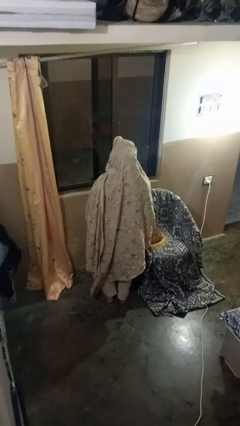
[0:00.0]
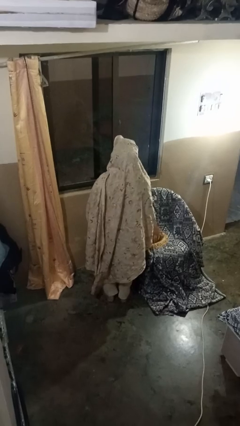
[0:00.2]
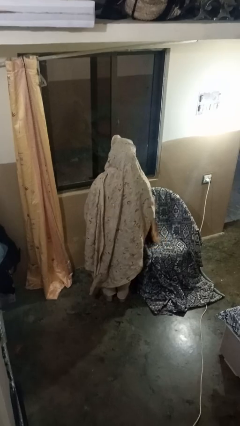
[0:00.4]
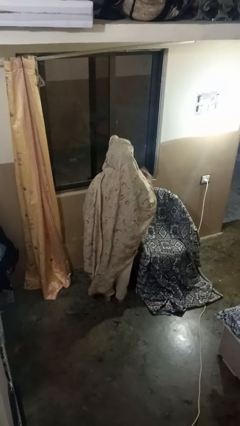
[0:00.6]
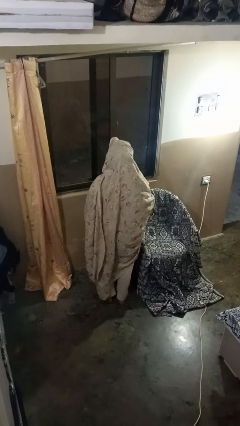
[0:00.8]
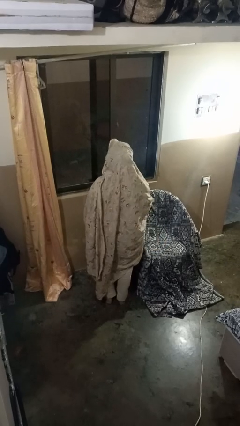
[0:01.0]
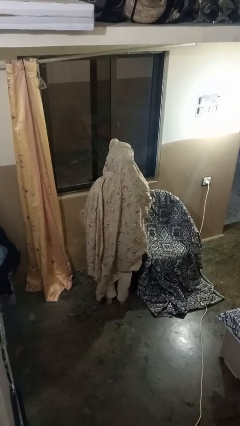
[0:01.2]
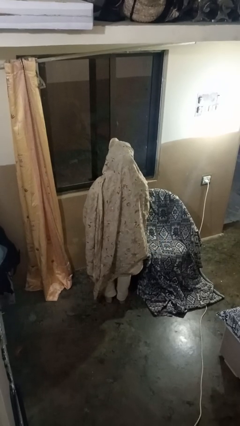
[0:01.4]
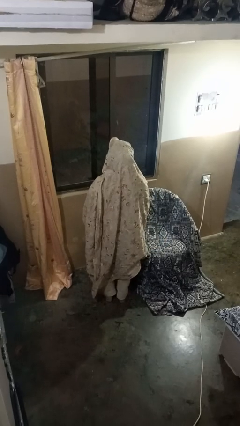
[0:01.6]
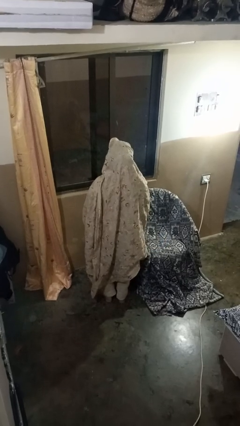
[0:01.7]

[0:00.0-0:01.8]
person picks up object from couch

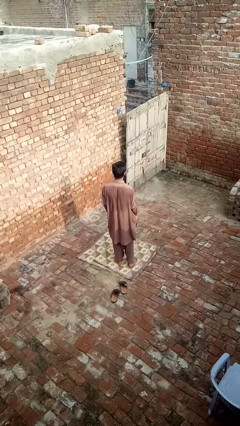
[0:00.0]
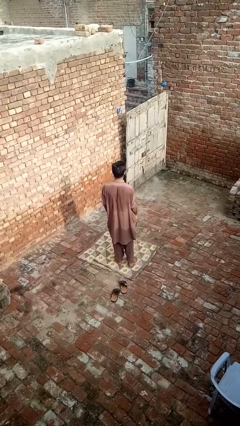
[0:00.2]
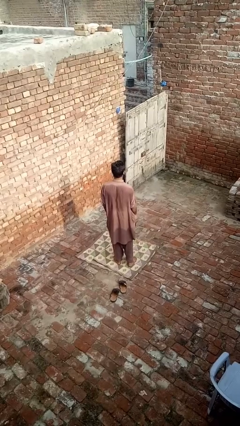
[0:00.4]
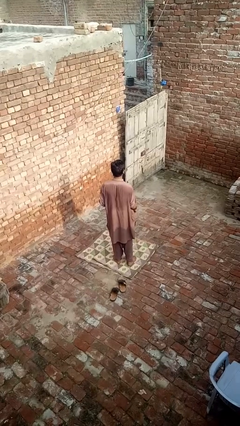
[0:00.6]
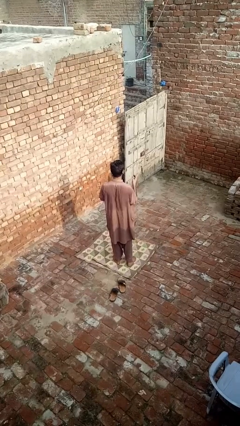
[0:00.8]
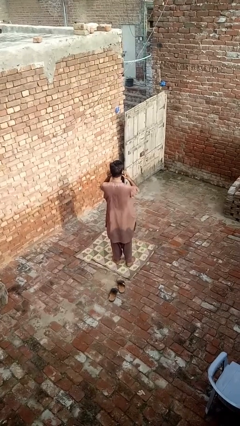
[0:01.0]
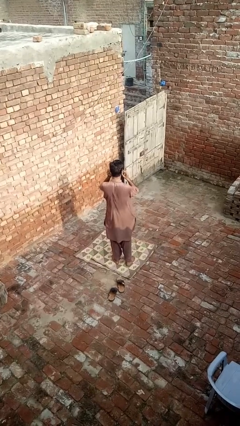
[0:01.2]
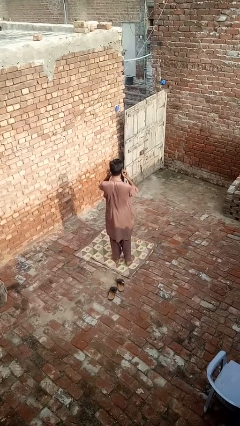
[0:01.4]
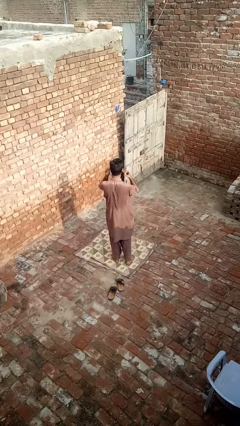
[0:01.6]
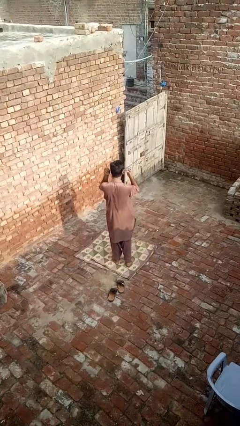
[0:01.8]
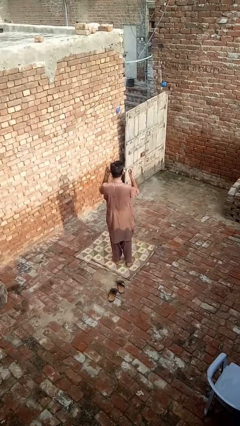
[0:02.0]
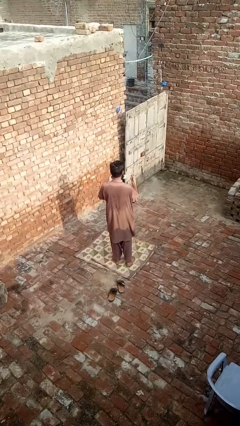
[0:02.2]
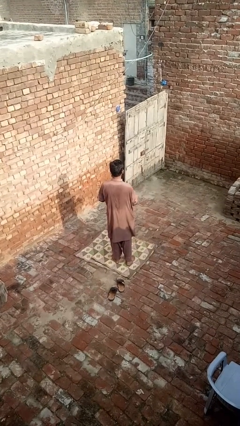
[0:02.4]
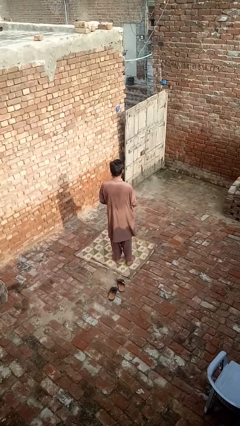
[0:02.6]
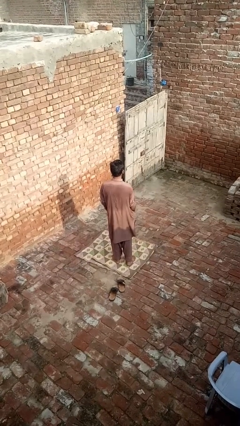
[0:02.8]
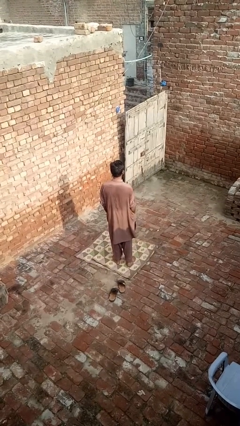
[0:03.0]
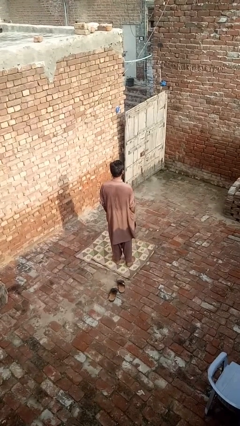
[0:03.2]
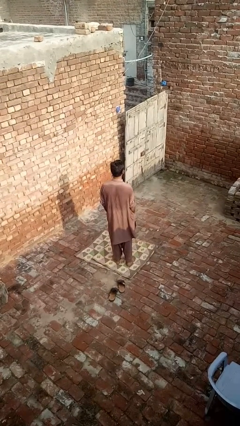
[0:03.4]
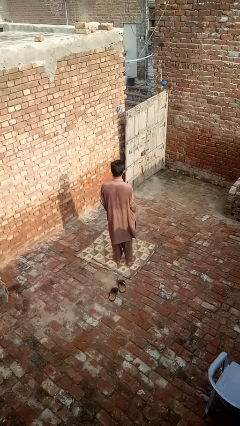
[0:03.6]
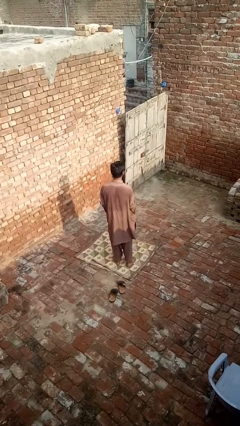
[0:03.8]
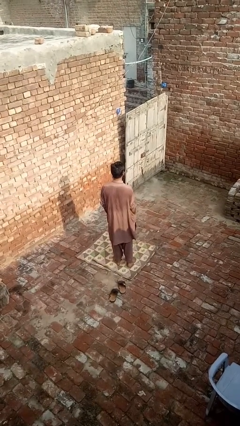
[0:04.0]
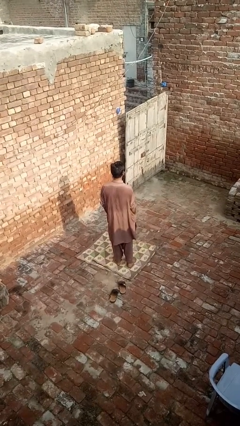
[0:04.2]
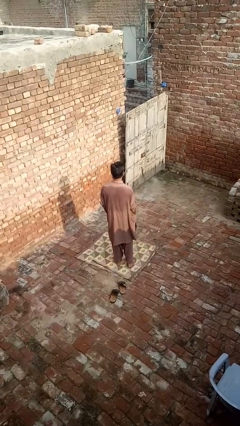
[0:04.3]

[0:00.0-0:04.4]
person takes off facemask

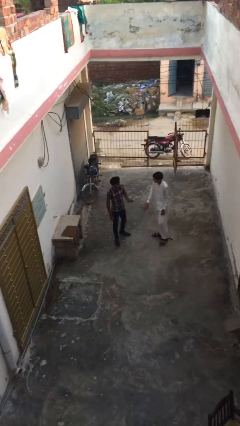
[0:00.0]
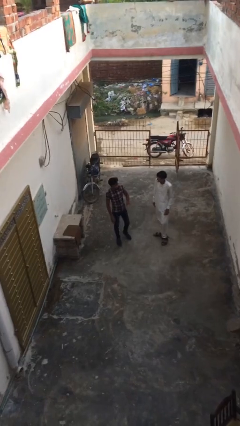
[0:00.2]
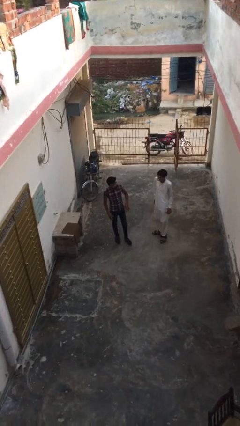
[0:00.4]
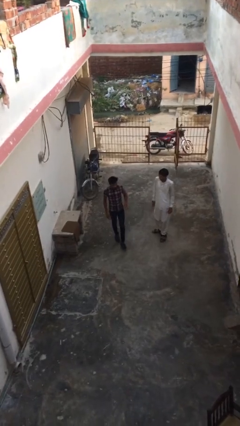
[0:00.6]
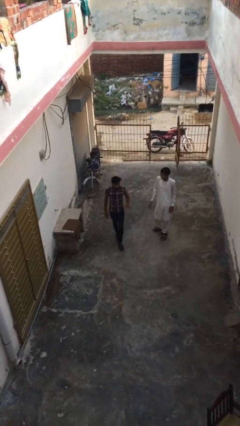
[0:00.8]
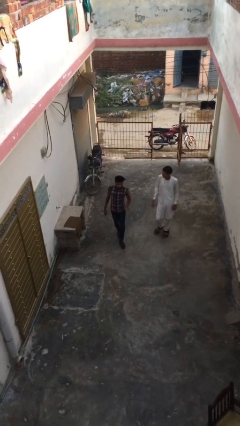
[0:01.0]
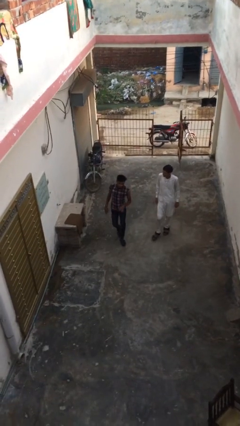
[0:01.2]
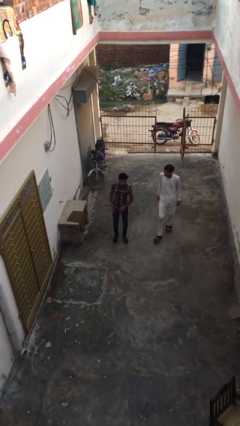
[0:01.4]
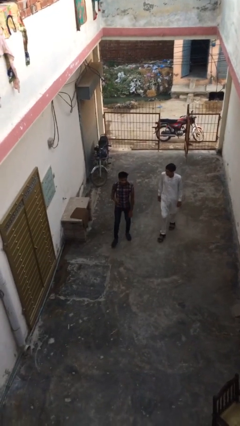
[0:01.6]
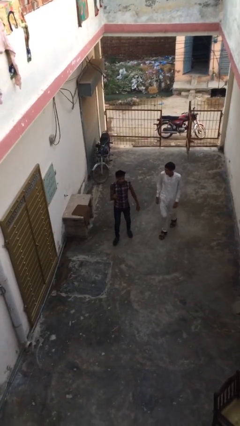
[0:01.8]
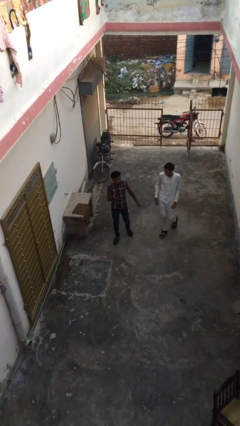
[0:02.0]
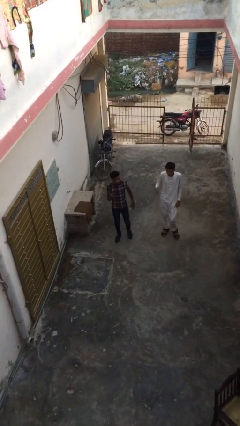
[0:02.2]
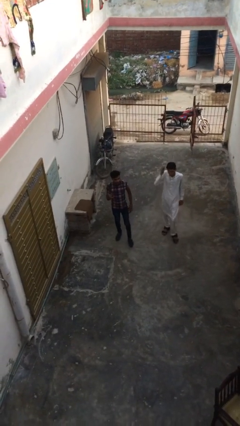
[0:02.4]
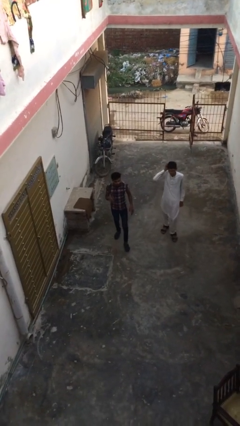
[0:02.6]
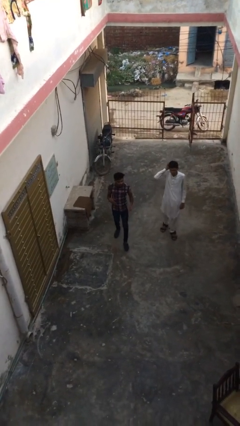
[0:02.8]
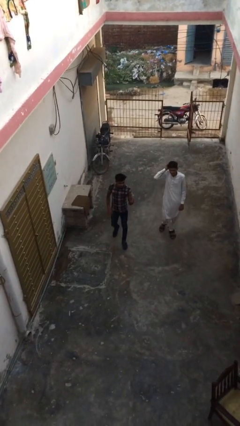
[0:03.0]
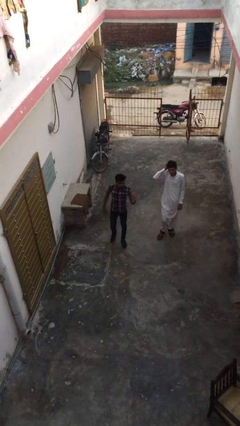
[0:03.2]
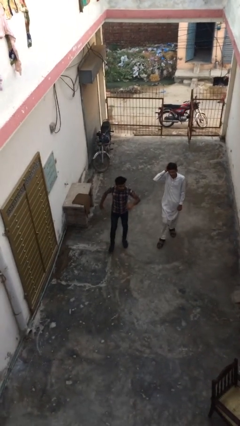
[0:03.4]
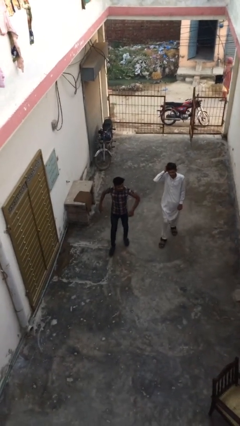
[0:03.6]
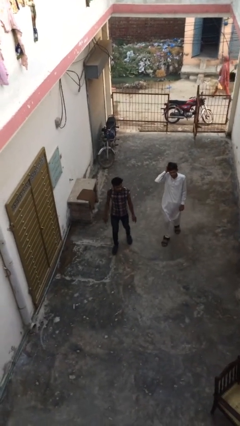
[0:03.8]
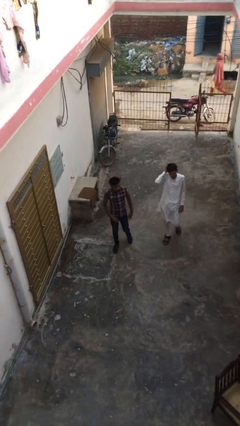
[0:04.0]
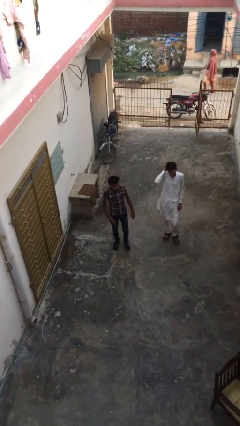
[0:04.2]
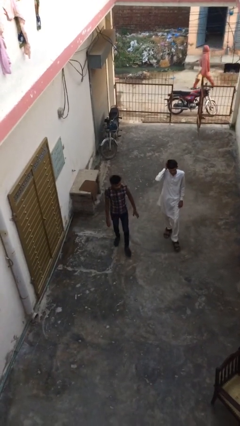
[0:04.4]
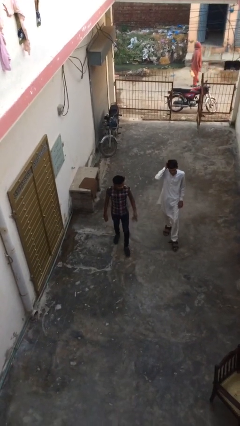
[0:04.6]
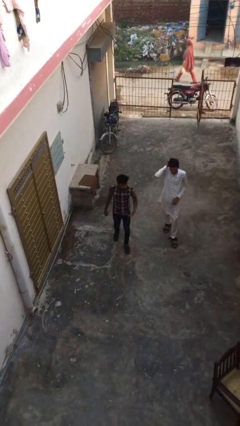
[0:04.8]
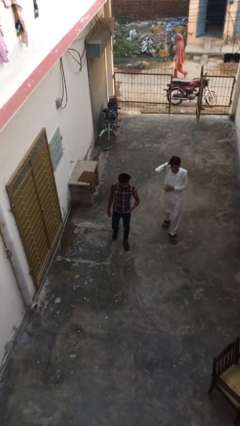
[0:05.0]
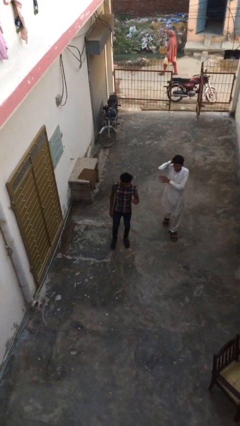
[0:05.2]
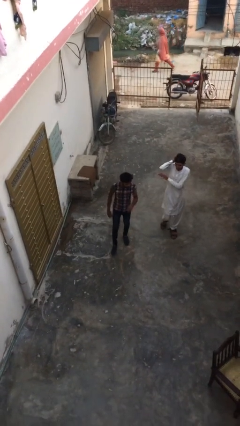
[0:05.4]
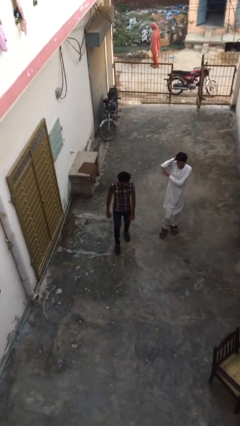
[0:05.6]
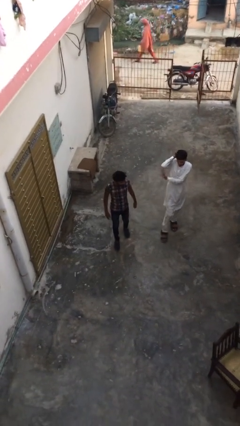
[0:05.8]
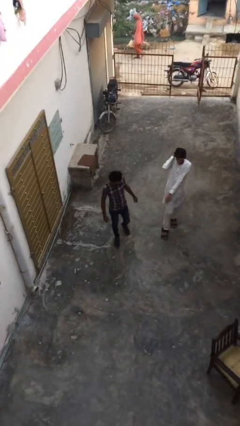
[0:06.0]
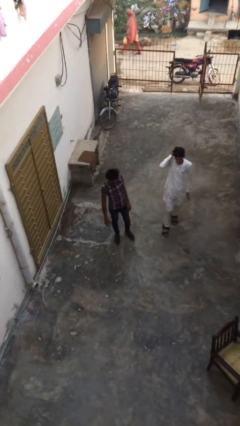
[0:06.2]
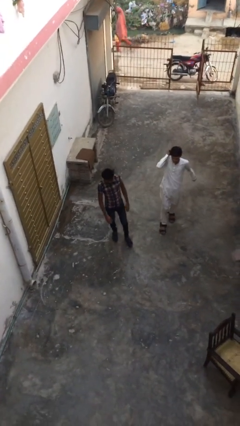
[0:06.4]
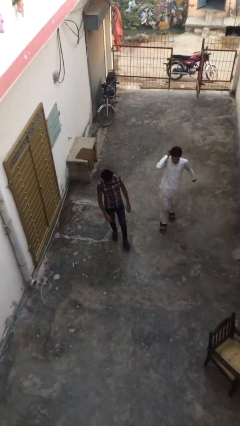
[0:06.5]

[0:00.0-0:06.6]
person talks to person

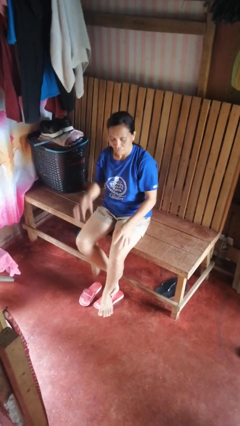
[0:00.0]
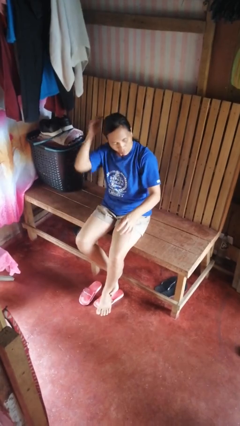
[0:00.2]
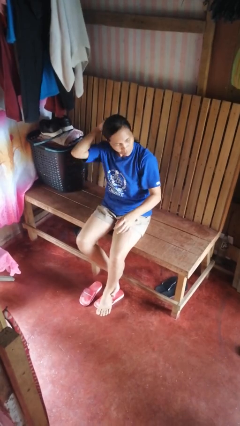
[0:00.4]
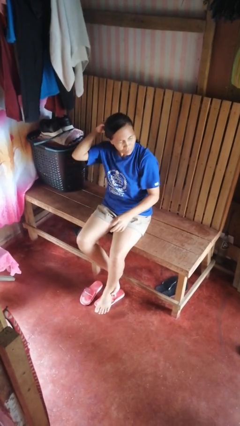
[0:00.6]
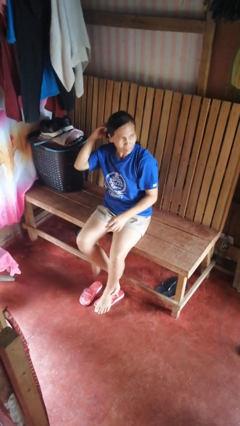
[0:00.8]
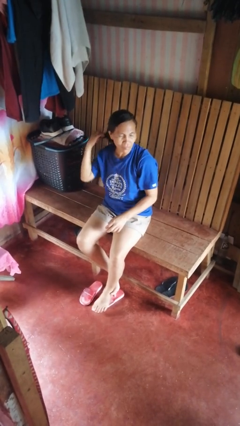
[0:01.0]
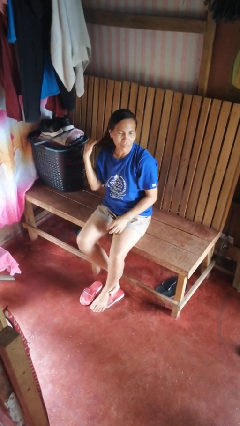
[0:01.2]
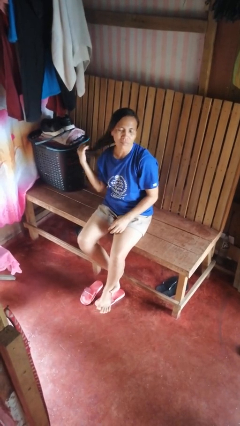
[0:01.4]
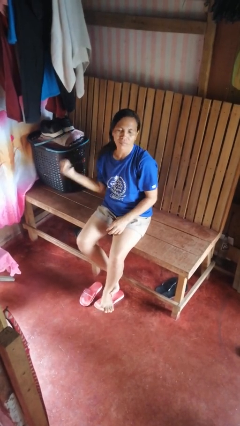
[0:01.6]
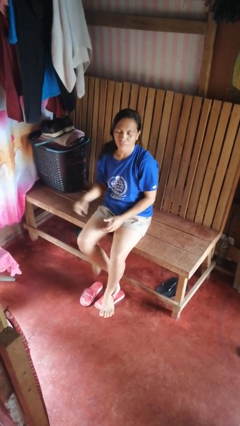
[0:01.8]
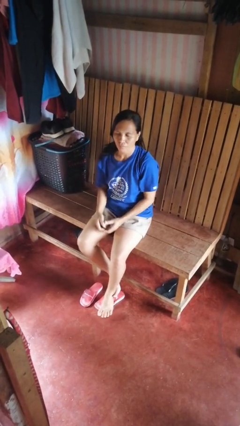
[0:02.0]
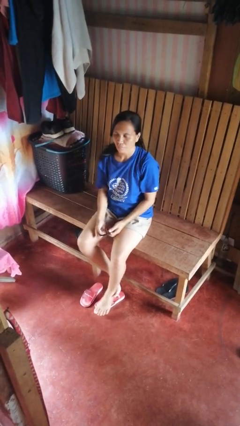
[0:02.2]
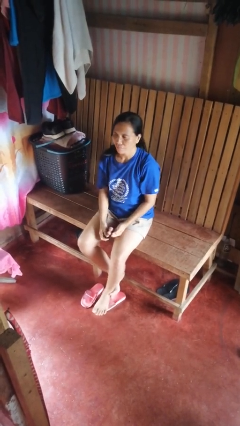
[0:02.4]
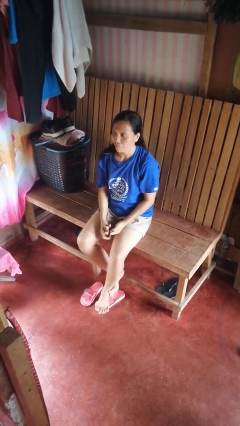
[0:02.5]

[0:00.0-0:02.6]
person takes off hairtie

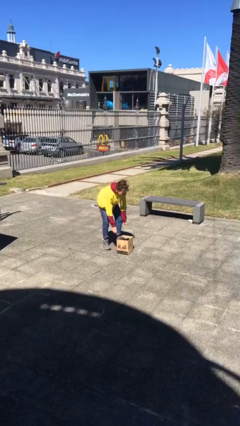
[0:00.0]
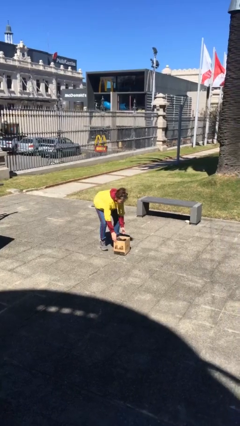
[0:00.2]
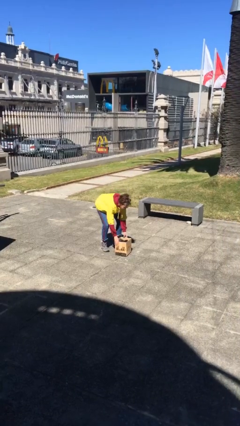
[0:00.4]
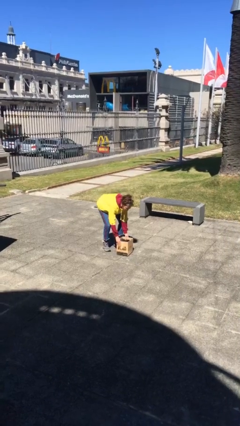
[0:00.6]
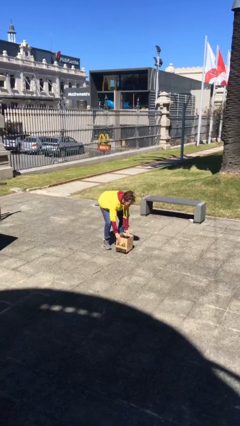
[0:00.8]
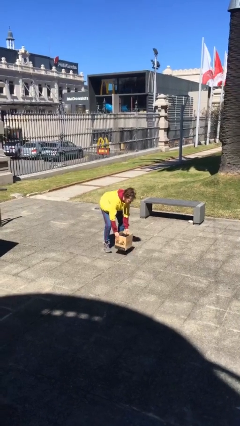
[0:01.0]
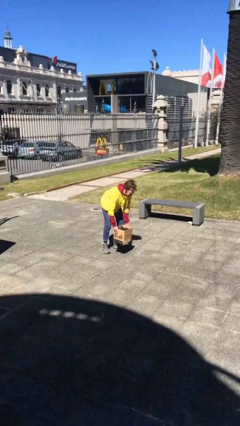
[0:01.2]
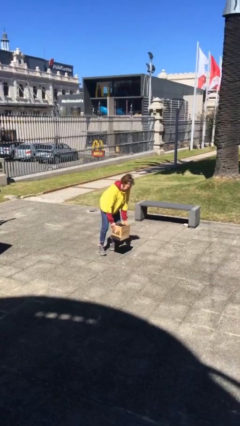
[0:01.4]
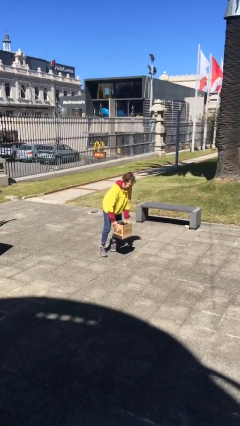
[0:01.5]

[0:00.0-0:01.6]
person picks up object from floor

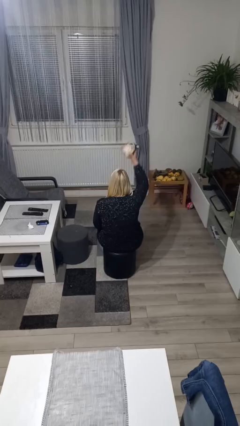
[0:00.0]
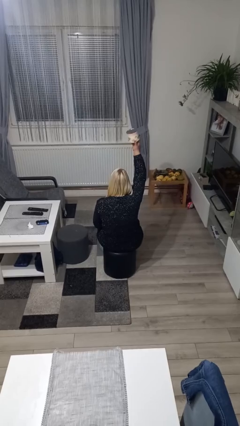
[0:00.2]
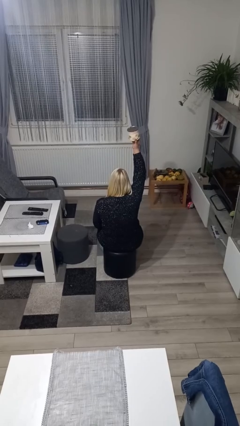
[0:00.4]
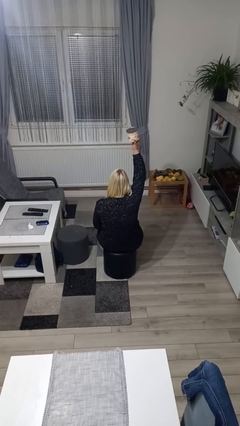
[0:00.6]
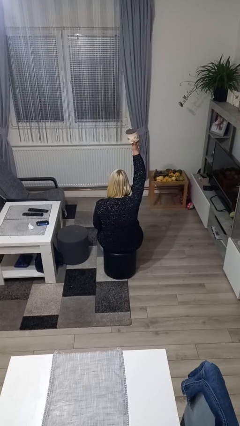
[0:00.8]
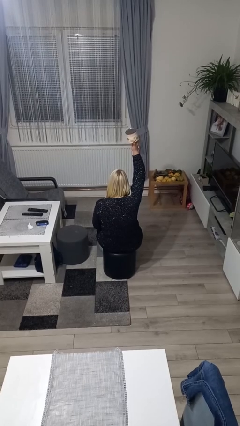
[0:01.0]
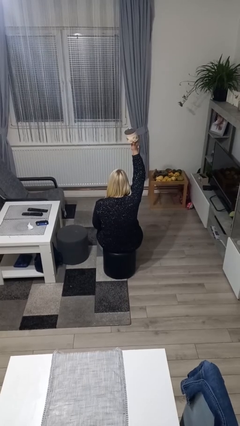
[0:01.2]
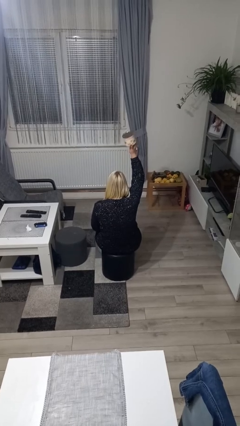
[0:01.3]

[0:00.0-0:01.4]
person holds object above head
